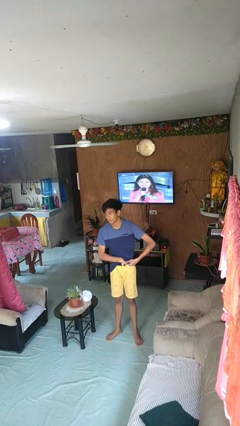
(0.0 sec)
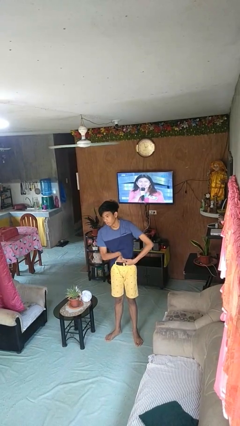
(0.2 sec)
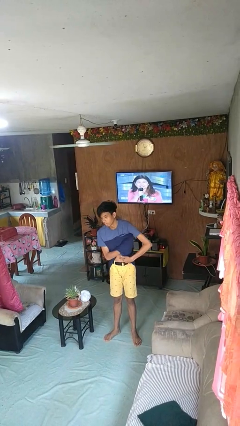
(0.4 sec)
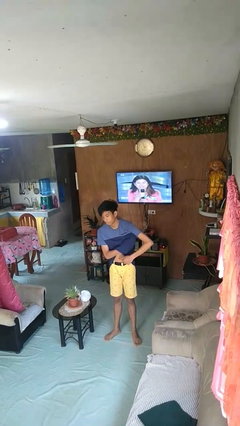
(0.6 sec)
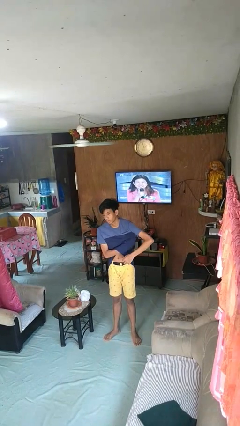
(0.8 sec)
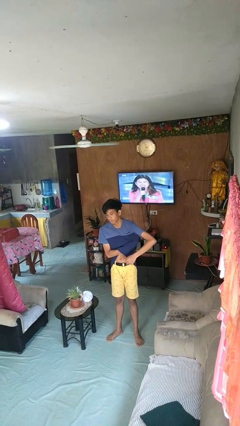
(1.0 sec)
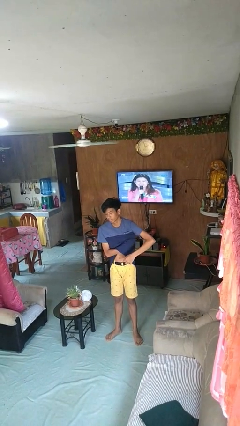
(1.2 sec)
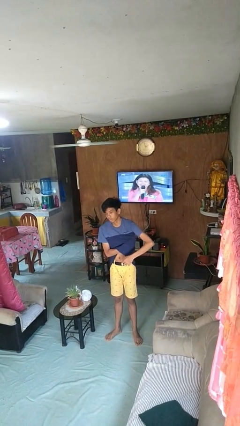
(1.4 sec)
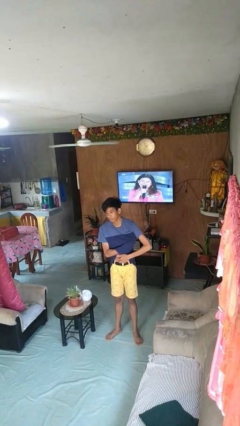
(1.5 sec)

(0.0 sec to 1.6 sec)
person applies deodorant

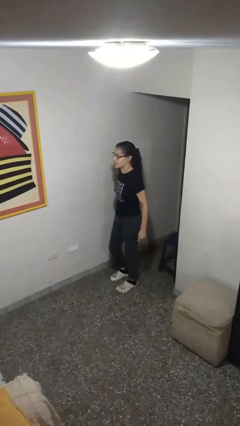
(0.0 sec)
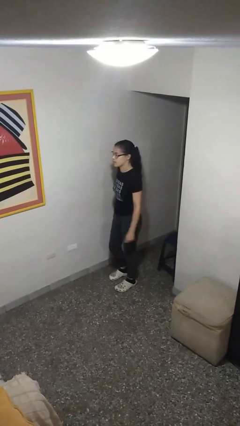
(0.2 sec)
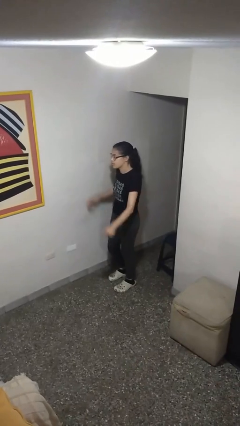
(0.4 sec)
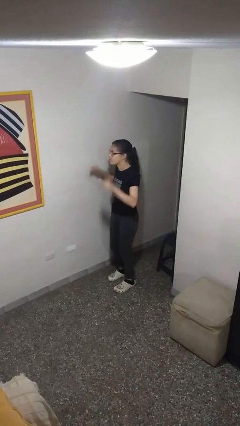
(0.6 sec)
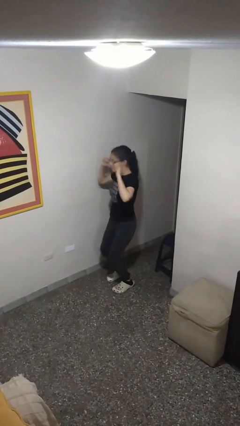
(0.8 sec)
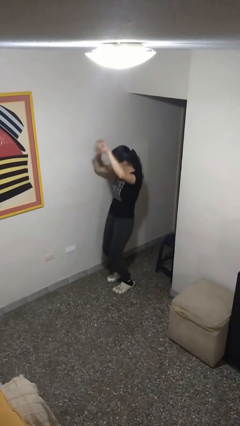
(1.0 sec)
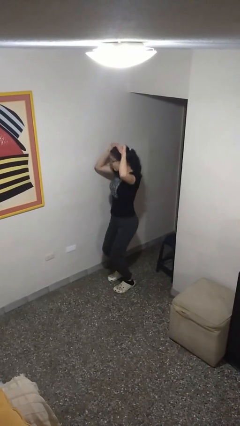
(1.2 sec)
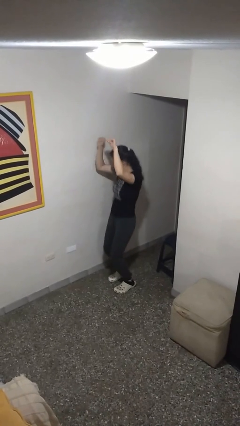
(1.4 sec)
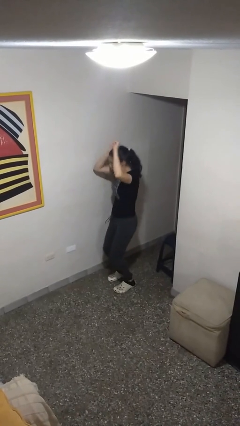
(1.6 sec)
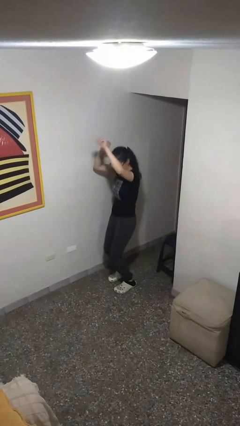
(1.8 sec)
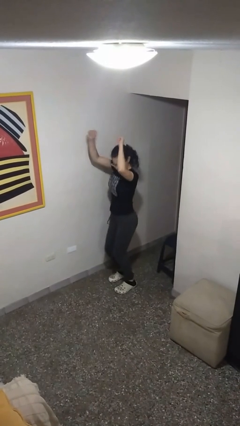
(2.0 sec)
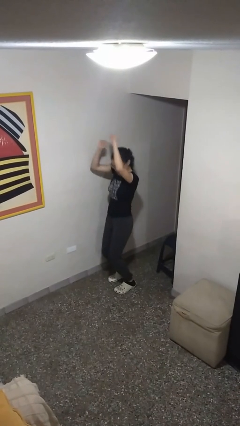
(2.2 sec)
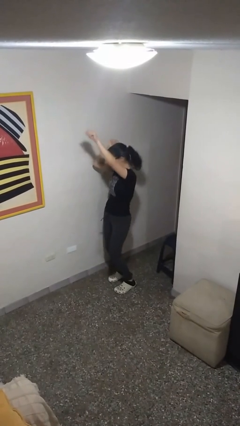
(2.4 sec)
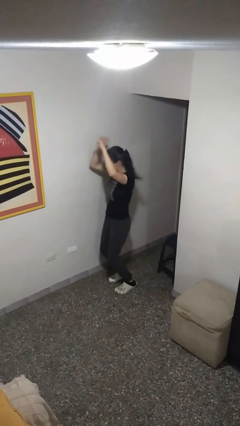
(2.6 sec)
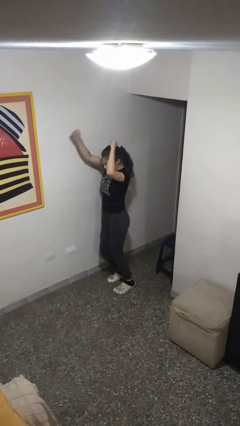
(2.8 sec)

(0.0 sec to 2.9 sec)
person dances in place

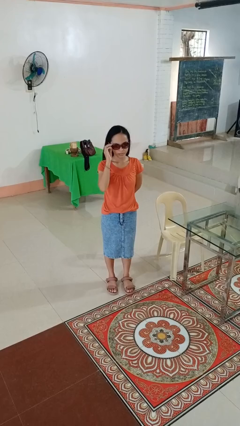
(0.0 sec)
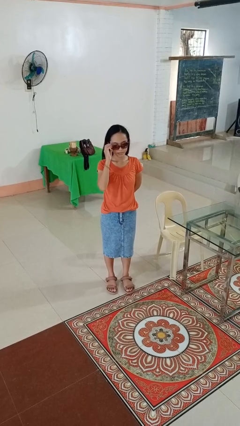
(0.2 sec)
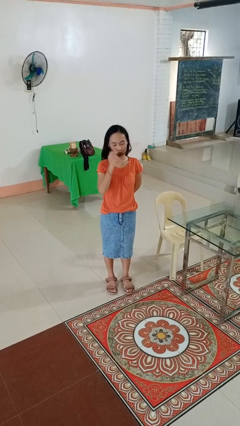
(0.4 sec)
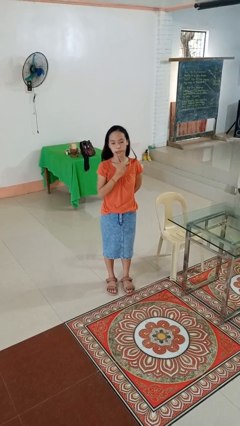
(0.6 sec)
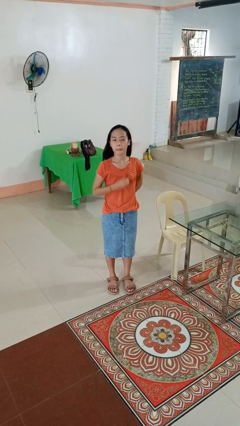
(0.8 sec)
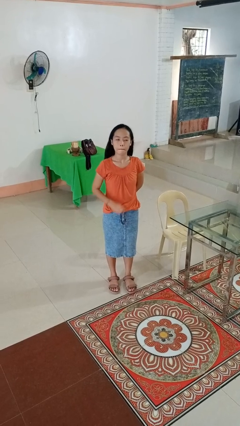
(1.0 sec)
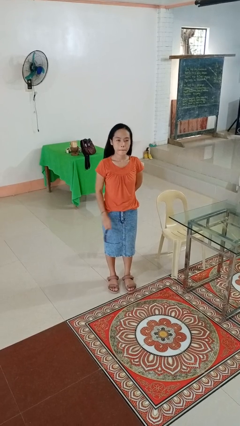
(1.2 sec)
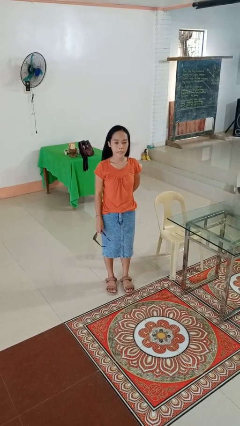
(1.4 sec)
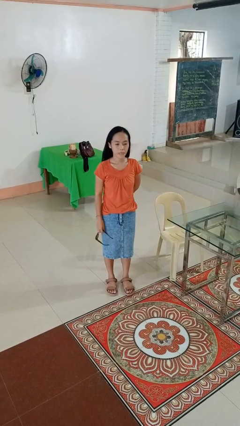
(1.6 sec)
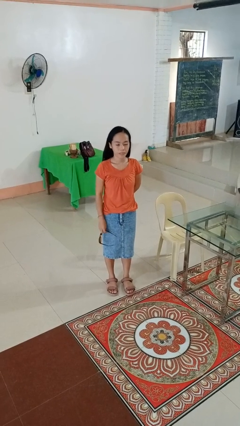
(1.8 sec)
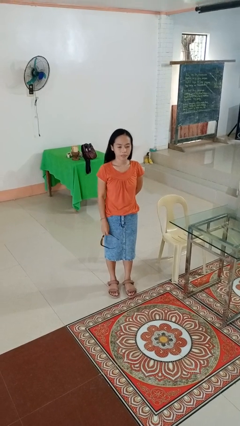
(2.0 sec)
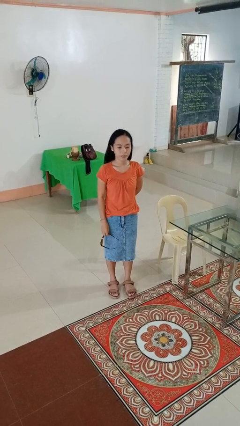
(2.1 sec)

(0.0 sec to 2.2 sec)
person takes off sunglasses

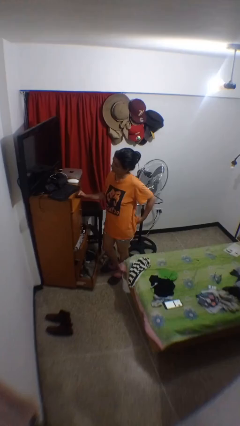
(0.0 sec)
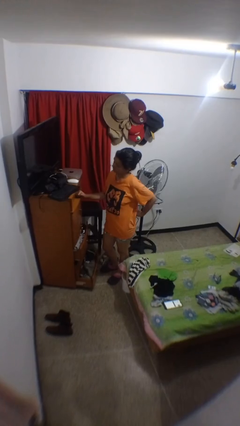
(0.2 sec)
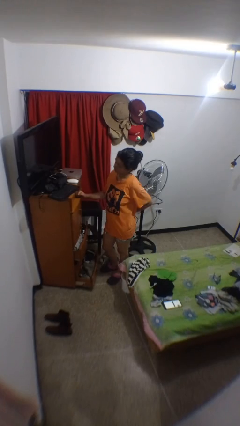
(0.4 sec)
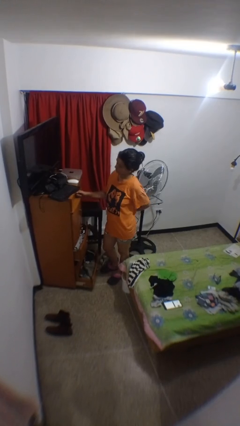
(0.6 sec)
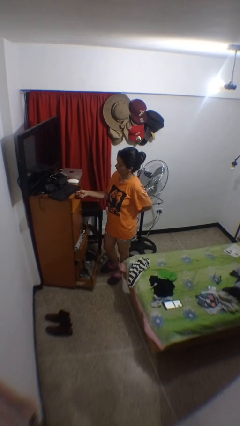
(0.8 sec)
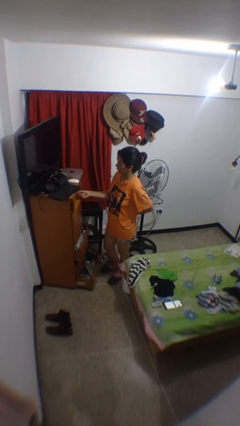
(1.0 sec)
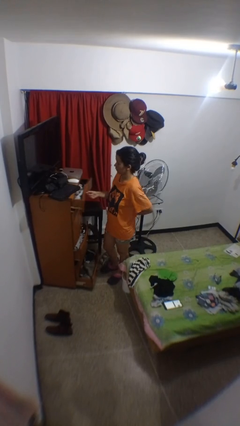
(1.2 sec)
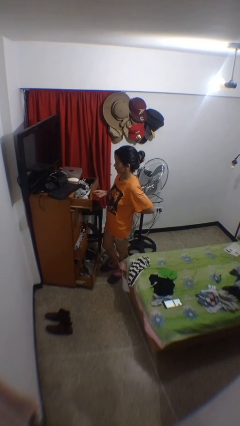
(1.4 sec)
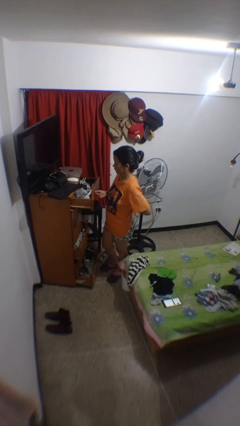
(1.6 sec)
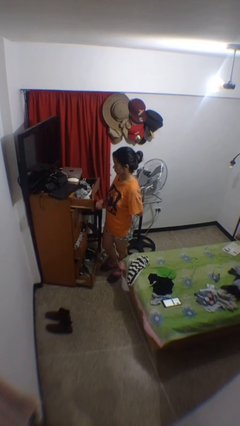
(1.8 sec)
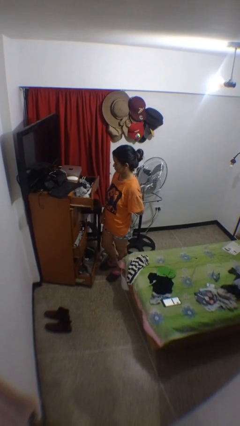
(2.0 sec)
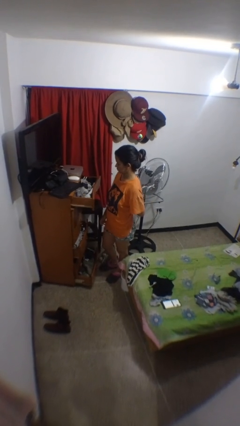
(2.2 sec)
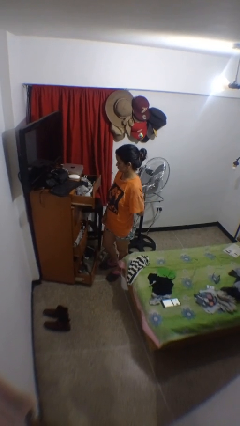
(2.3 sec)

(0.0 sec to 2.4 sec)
person opens dresser drawer

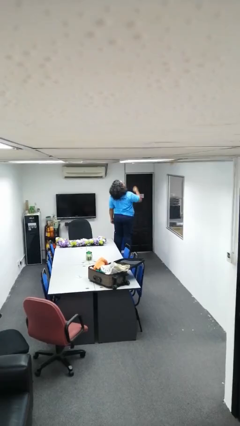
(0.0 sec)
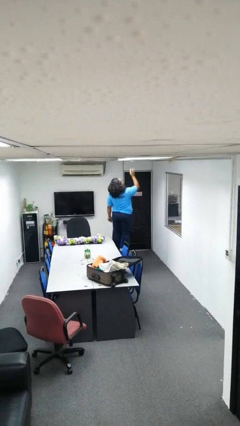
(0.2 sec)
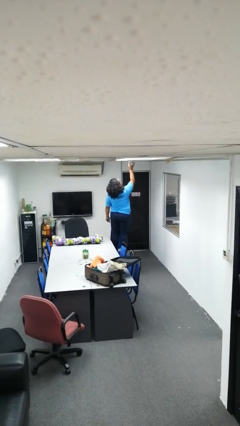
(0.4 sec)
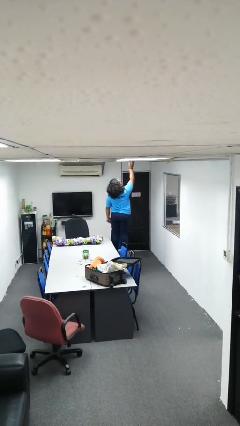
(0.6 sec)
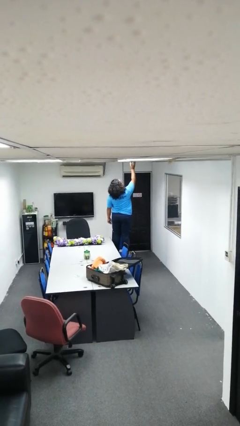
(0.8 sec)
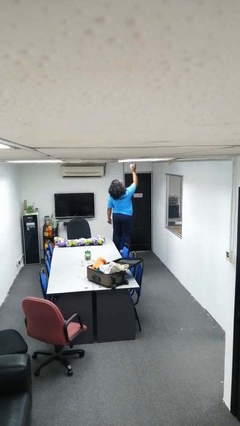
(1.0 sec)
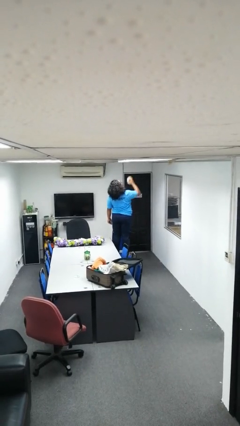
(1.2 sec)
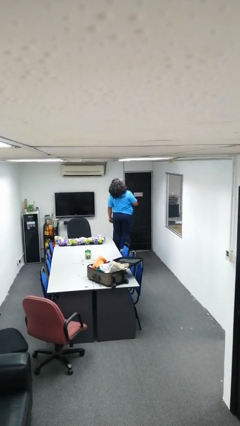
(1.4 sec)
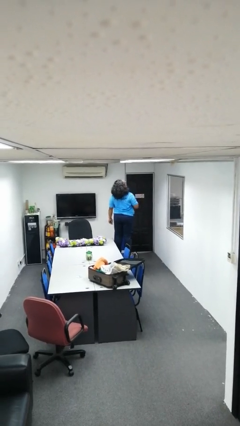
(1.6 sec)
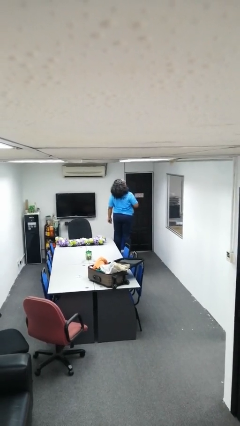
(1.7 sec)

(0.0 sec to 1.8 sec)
person takes down smoke detector

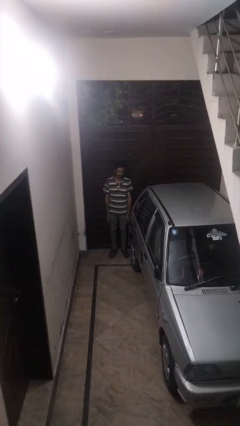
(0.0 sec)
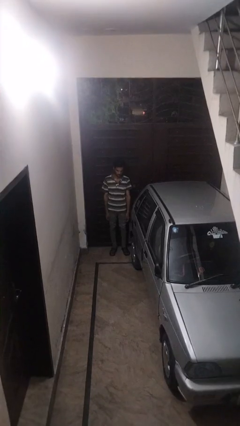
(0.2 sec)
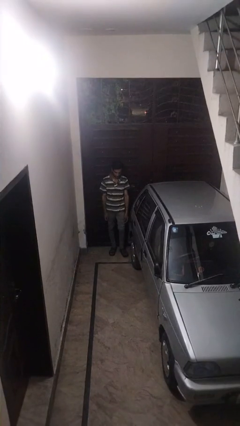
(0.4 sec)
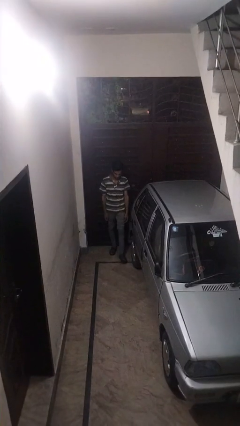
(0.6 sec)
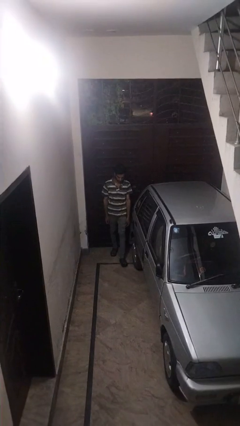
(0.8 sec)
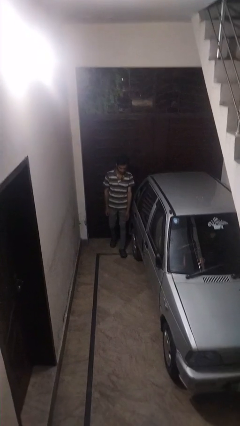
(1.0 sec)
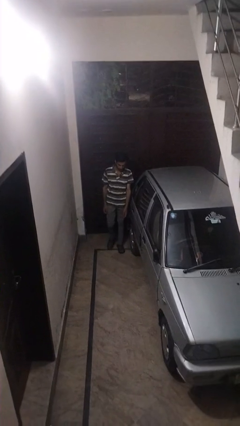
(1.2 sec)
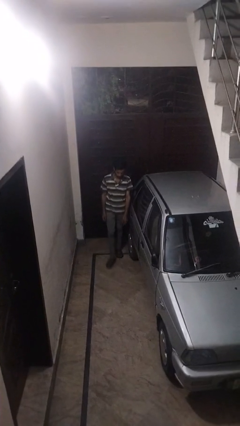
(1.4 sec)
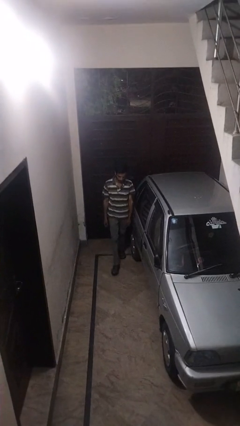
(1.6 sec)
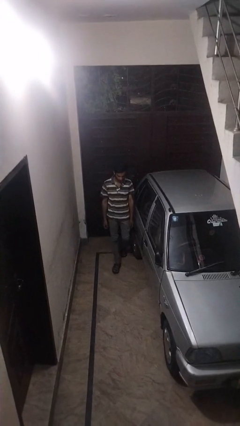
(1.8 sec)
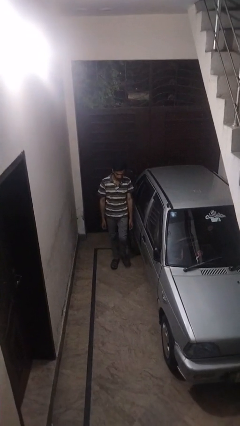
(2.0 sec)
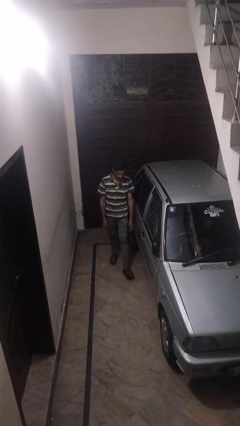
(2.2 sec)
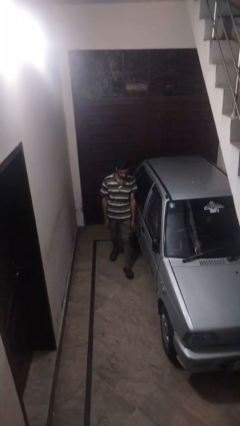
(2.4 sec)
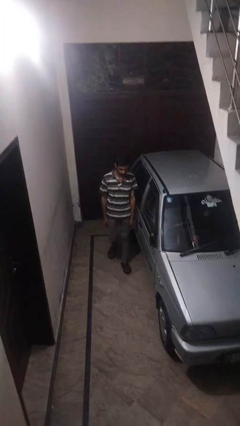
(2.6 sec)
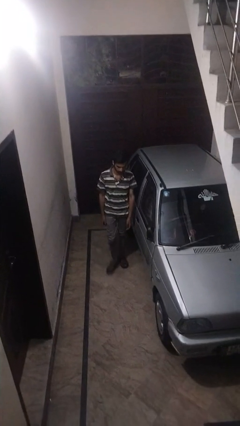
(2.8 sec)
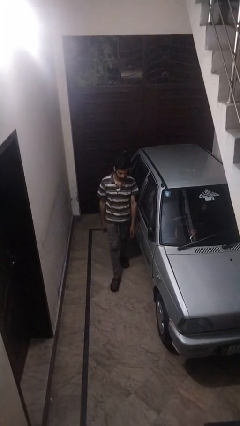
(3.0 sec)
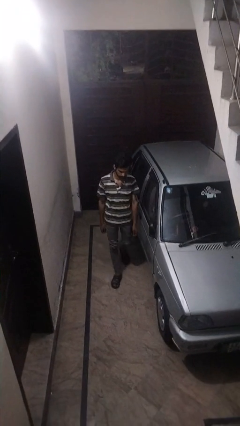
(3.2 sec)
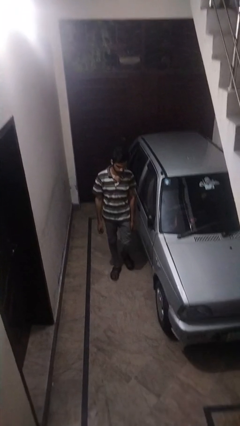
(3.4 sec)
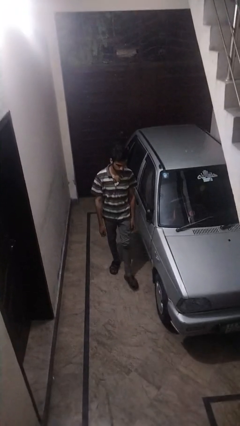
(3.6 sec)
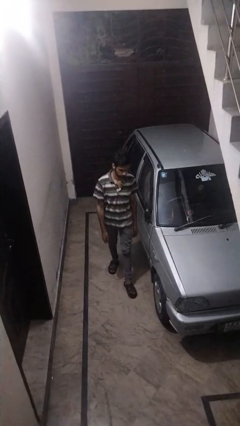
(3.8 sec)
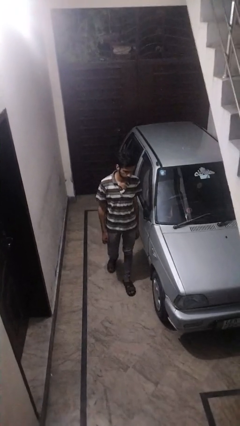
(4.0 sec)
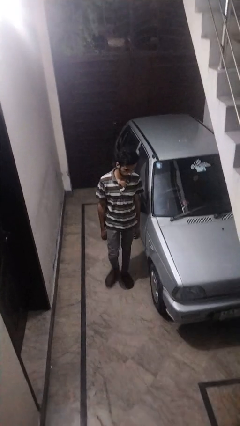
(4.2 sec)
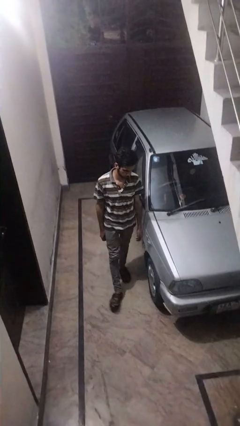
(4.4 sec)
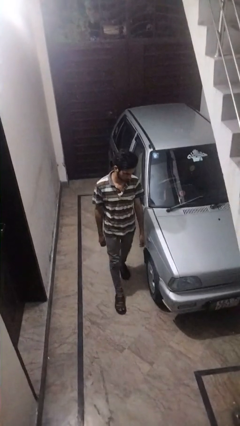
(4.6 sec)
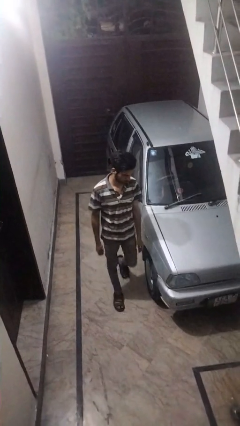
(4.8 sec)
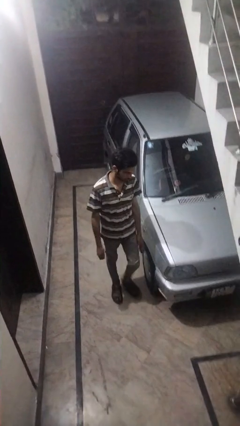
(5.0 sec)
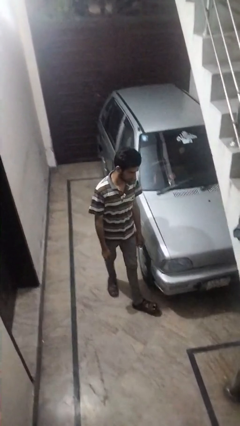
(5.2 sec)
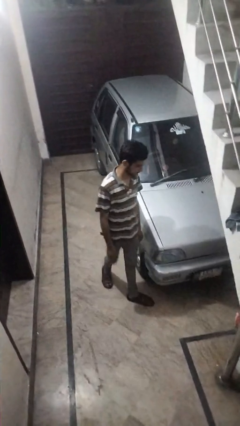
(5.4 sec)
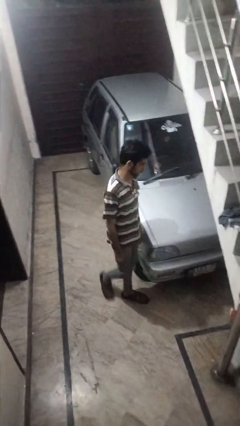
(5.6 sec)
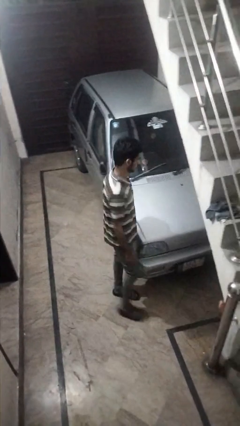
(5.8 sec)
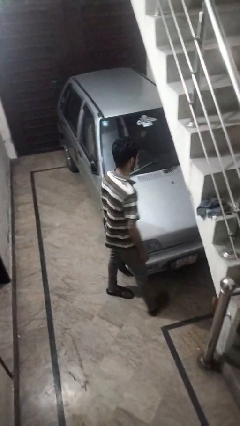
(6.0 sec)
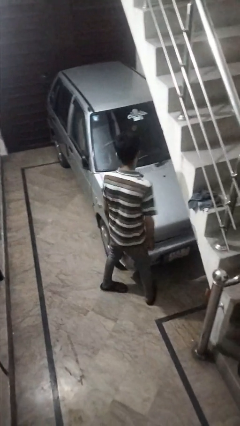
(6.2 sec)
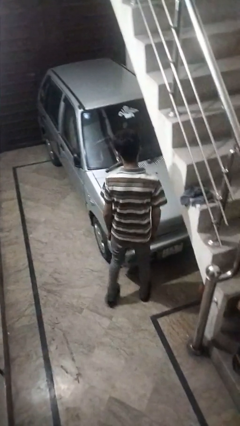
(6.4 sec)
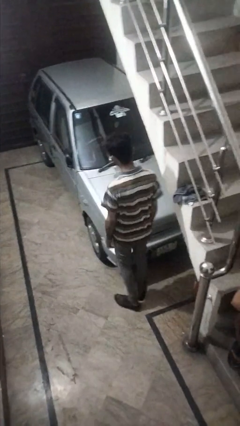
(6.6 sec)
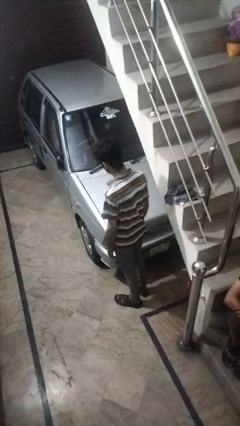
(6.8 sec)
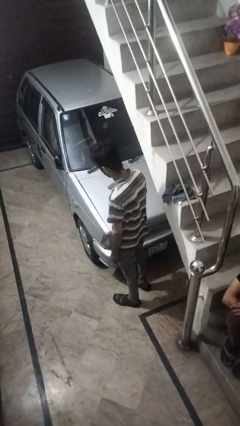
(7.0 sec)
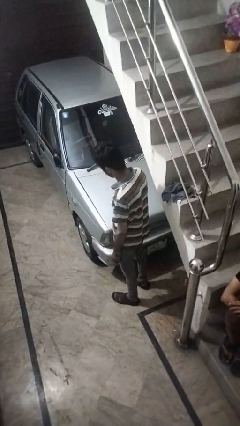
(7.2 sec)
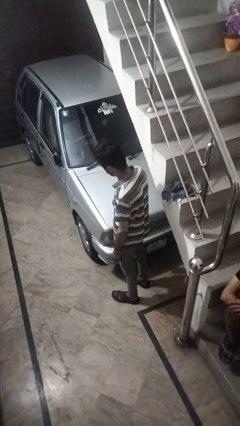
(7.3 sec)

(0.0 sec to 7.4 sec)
person walks around car
